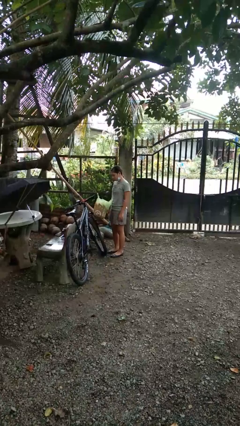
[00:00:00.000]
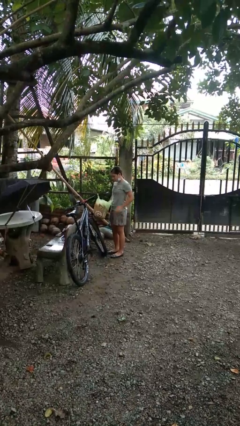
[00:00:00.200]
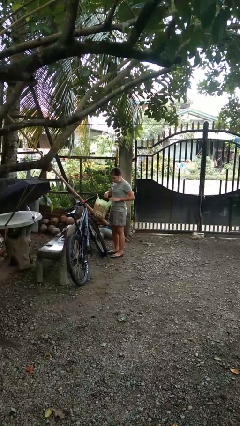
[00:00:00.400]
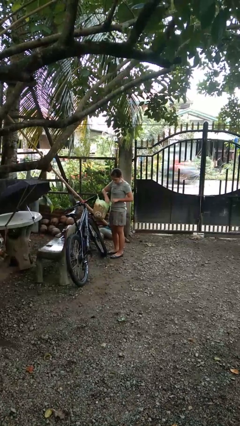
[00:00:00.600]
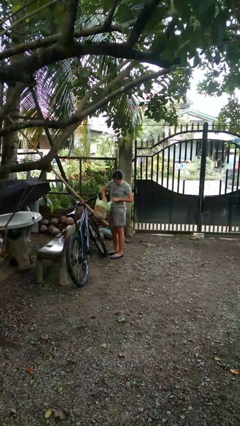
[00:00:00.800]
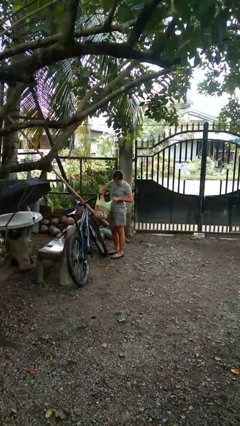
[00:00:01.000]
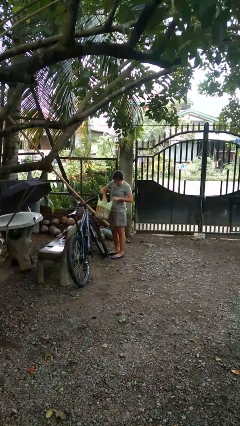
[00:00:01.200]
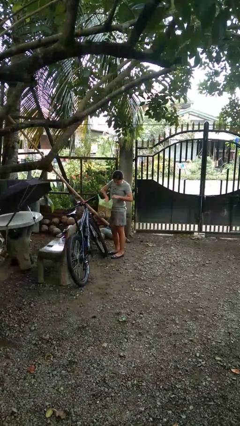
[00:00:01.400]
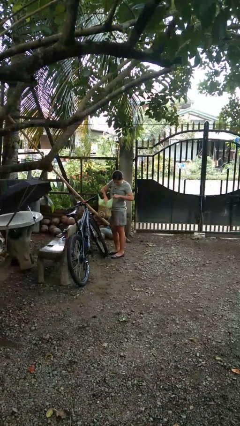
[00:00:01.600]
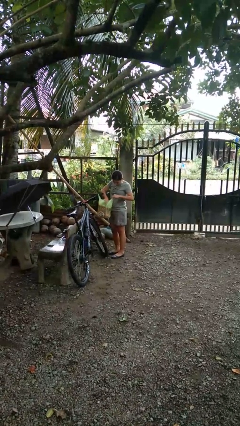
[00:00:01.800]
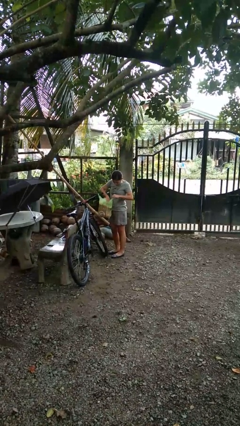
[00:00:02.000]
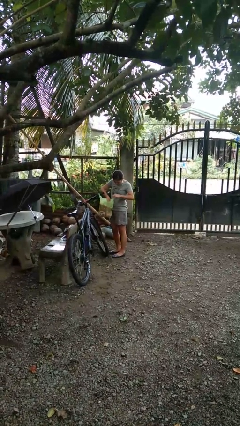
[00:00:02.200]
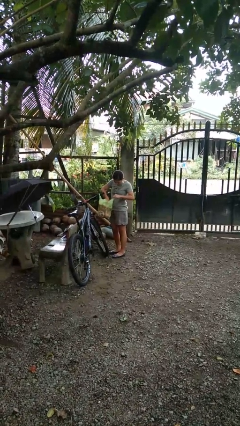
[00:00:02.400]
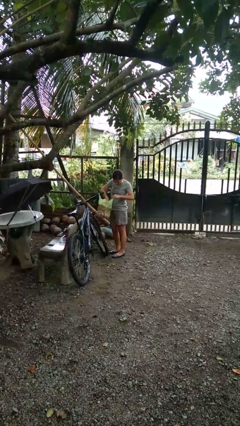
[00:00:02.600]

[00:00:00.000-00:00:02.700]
person searches in bag

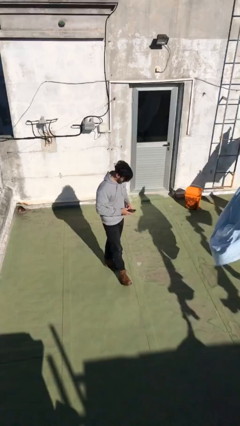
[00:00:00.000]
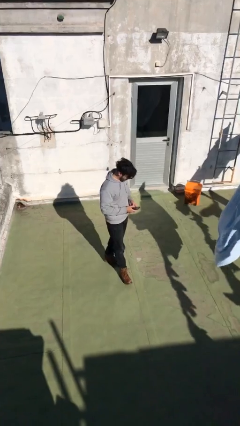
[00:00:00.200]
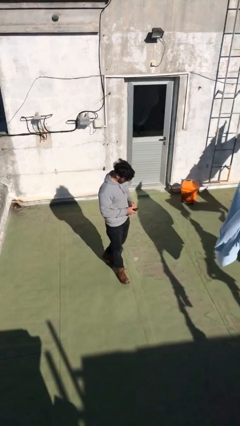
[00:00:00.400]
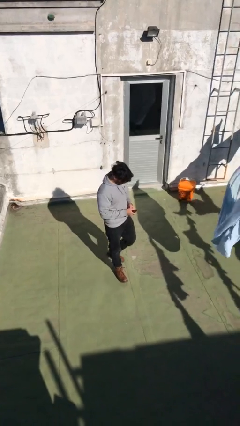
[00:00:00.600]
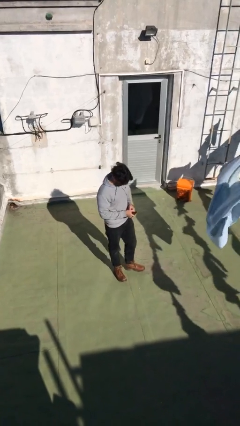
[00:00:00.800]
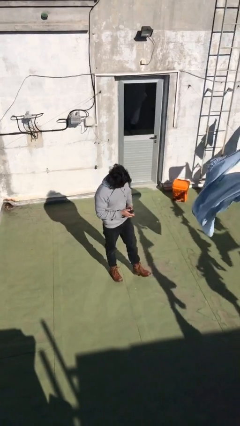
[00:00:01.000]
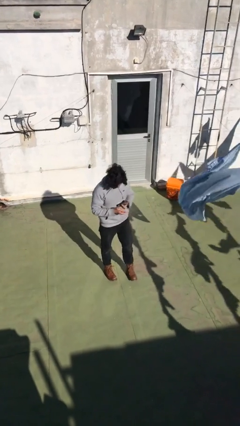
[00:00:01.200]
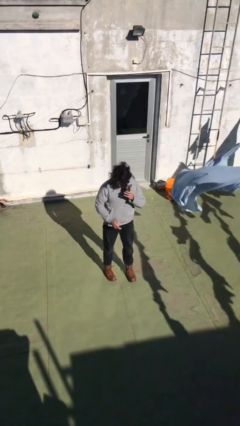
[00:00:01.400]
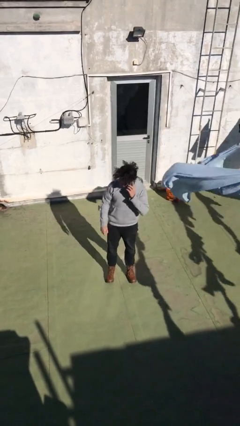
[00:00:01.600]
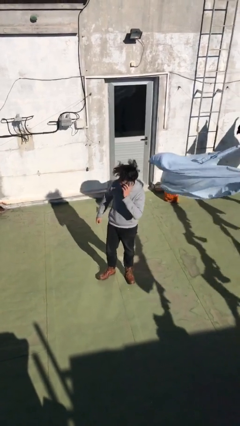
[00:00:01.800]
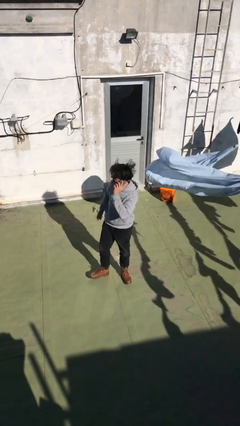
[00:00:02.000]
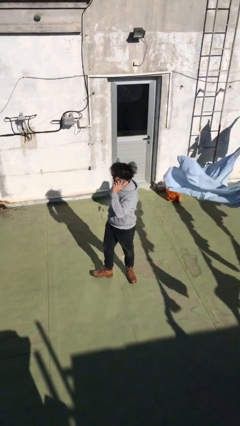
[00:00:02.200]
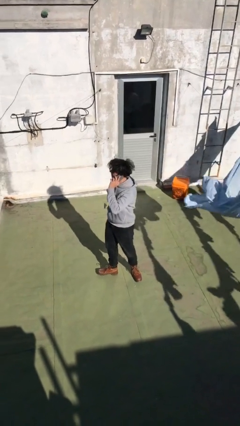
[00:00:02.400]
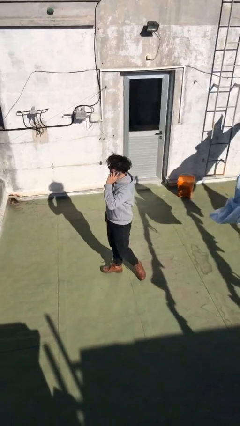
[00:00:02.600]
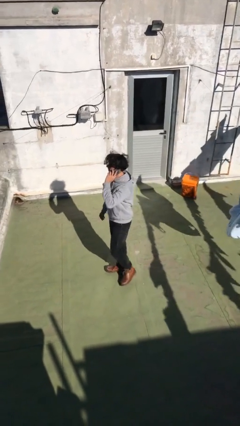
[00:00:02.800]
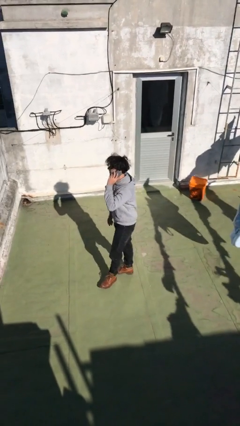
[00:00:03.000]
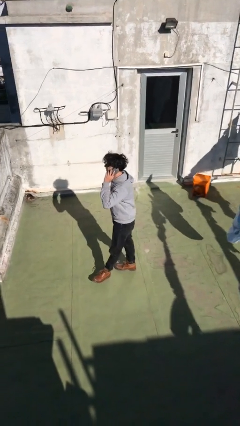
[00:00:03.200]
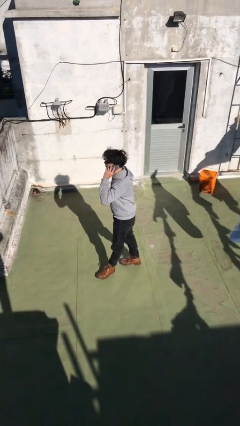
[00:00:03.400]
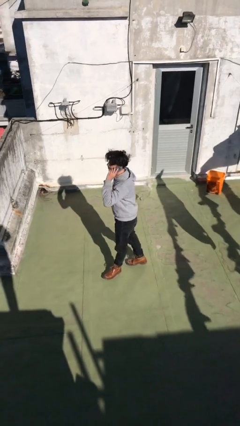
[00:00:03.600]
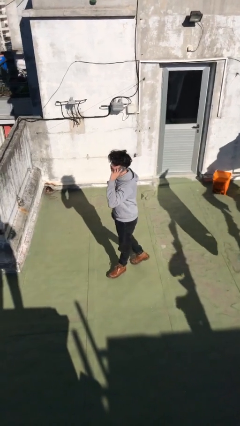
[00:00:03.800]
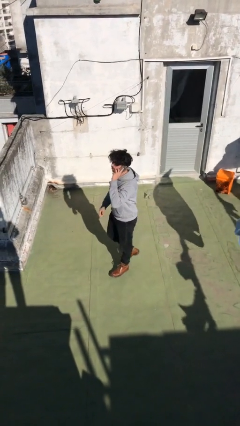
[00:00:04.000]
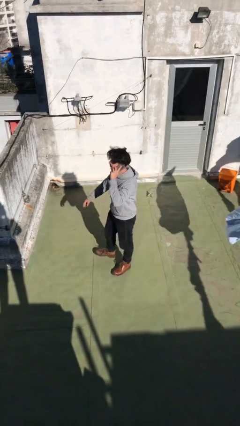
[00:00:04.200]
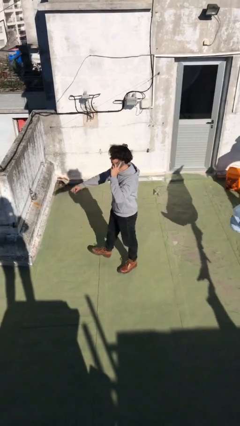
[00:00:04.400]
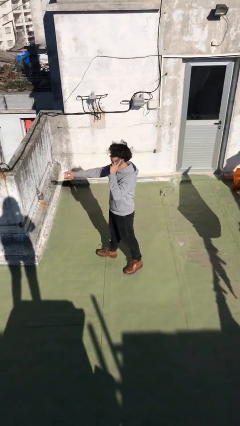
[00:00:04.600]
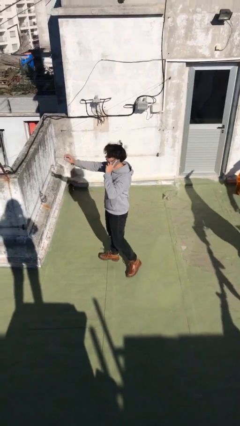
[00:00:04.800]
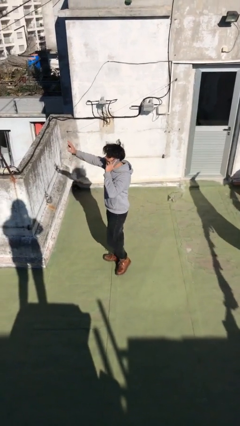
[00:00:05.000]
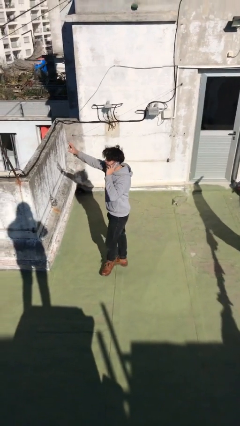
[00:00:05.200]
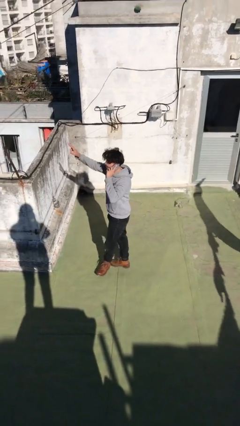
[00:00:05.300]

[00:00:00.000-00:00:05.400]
person talks on phone

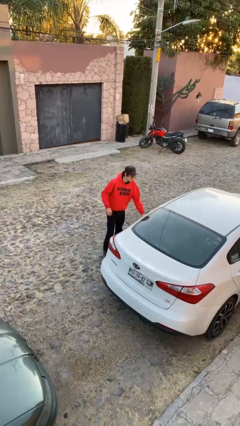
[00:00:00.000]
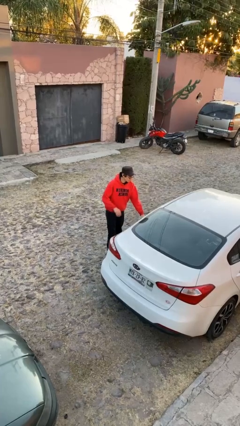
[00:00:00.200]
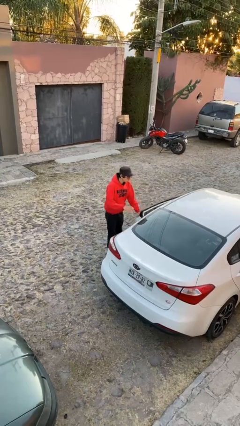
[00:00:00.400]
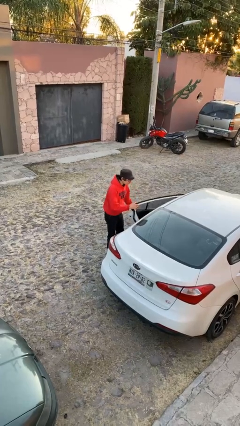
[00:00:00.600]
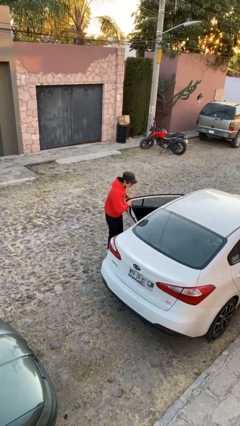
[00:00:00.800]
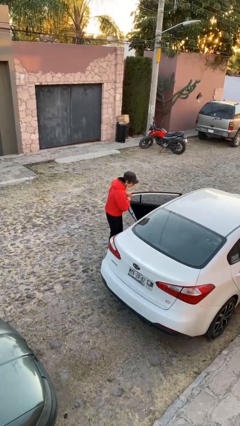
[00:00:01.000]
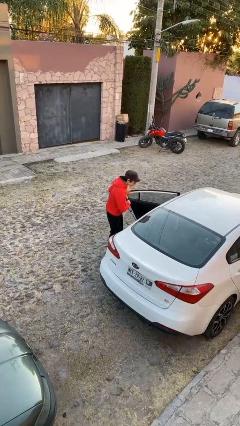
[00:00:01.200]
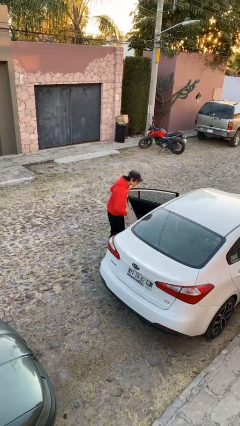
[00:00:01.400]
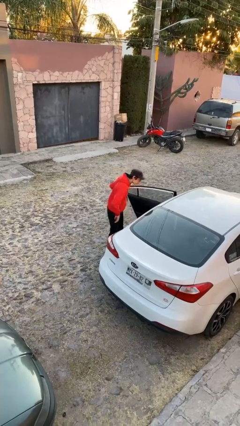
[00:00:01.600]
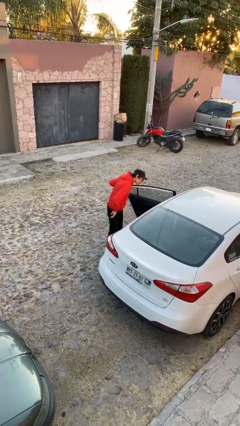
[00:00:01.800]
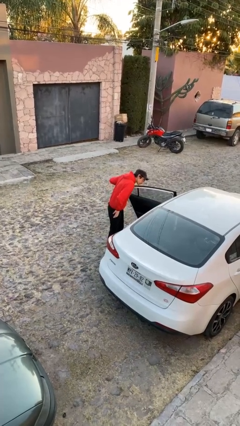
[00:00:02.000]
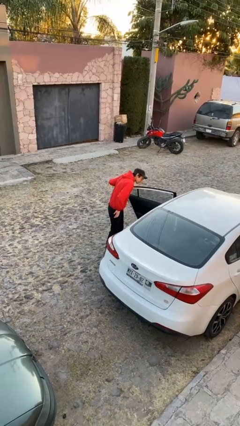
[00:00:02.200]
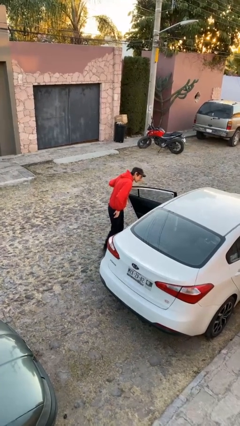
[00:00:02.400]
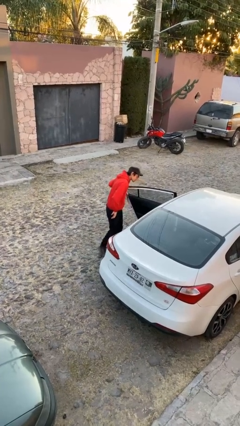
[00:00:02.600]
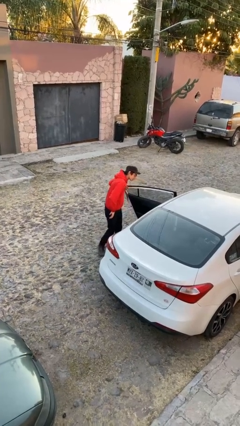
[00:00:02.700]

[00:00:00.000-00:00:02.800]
person opens car door

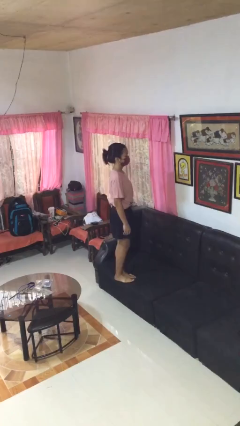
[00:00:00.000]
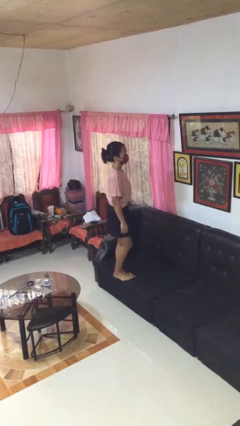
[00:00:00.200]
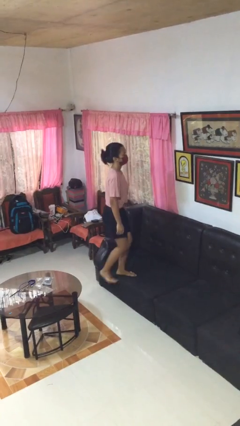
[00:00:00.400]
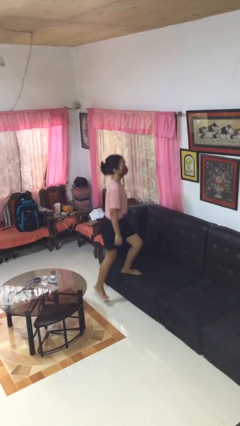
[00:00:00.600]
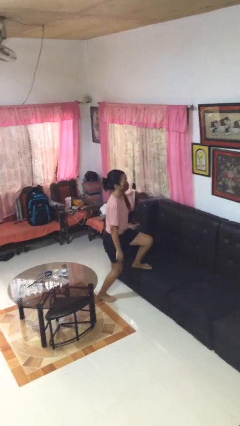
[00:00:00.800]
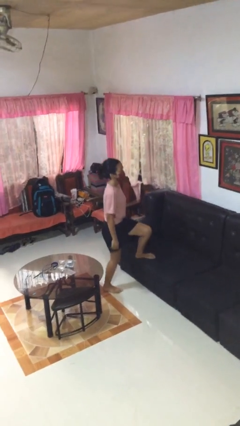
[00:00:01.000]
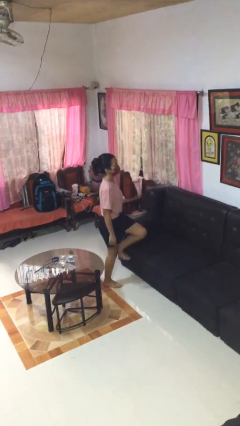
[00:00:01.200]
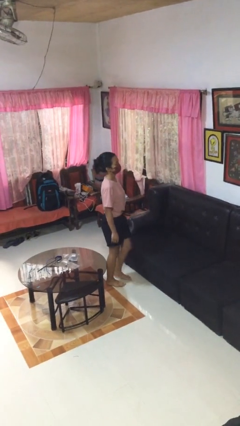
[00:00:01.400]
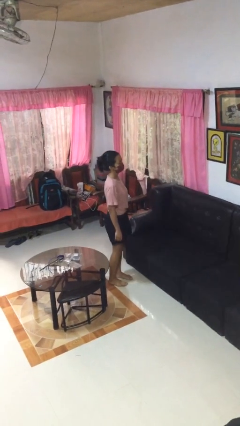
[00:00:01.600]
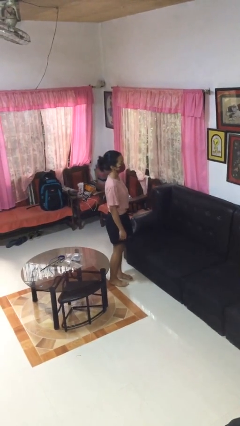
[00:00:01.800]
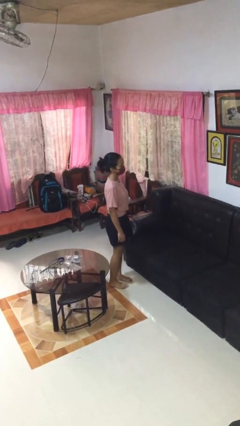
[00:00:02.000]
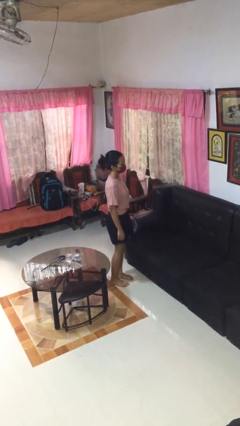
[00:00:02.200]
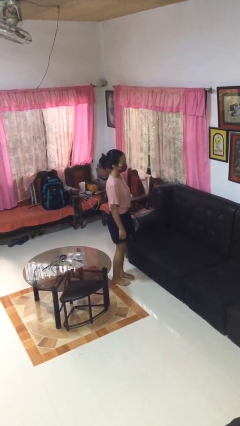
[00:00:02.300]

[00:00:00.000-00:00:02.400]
person climbs off couch

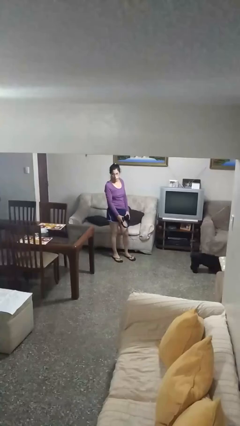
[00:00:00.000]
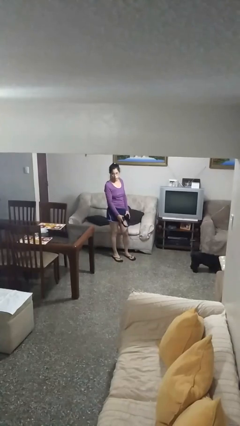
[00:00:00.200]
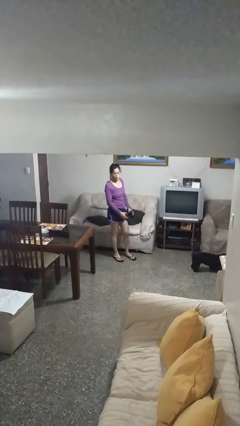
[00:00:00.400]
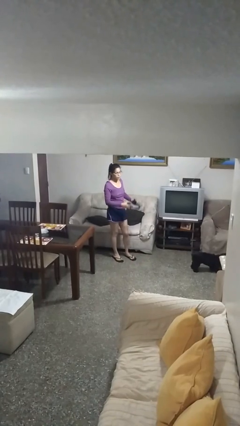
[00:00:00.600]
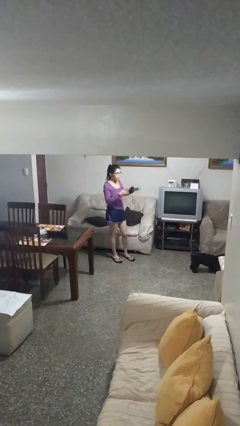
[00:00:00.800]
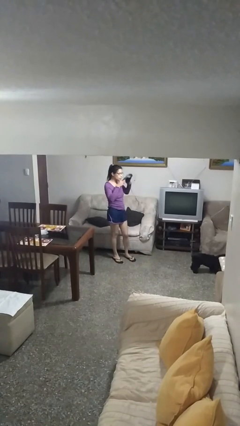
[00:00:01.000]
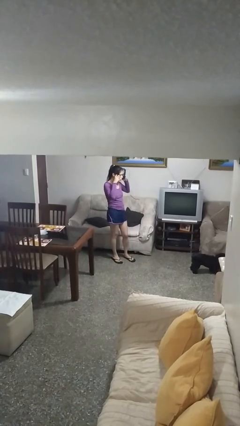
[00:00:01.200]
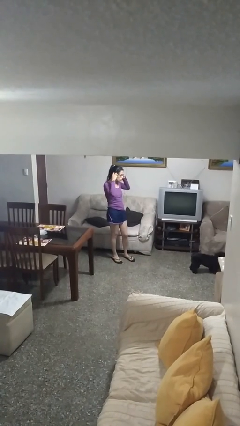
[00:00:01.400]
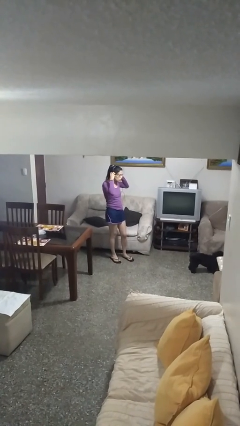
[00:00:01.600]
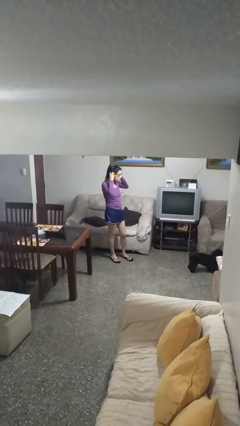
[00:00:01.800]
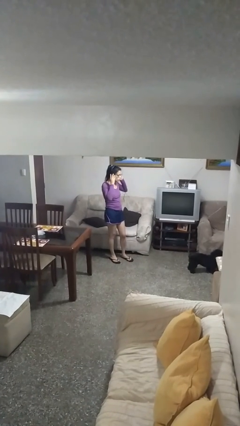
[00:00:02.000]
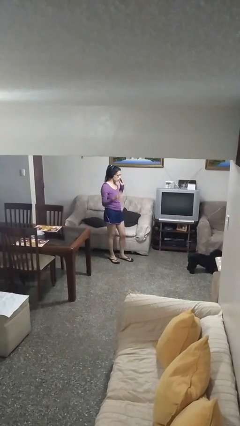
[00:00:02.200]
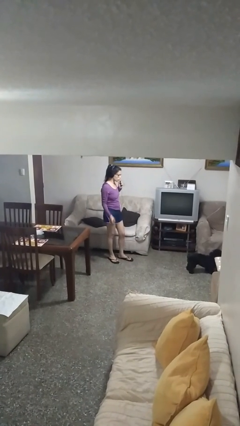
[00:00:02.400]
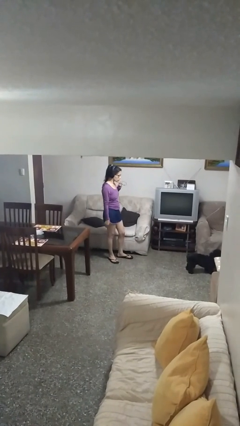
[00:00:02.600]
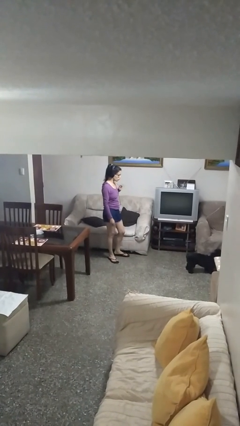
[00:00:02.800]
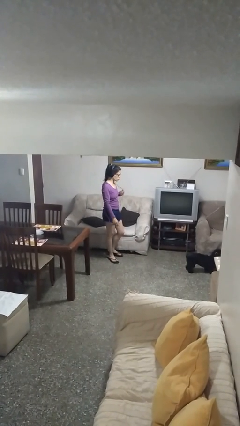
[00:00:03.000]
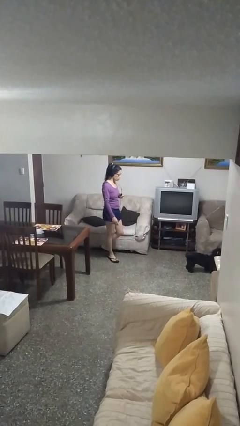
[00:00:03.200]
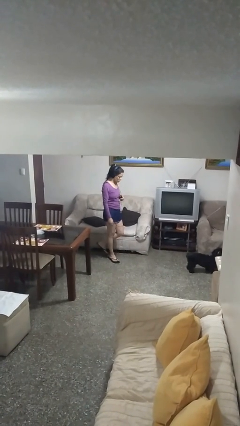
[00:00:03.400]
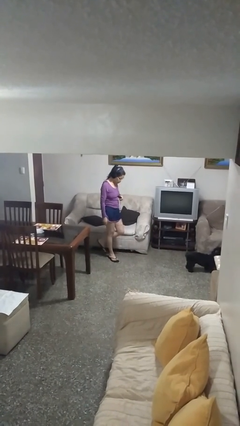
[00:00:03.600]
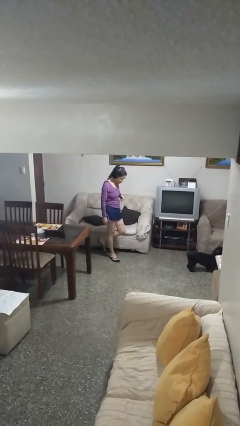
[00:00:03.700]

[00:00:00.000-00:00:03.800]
person puts on headphones
